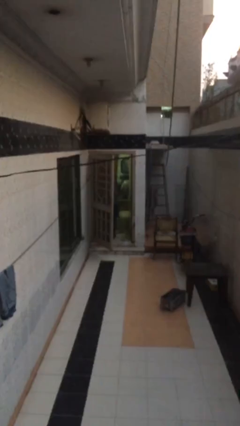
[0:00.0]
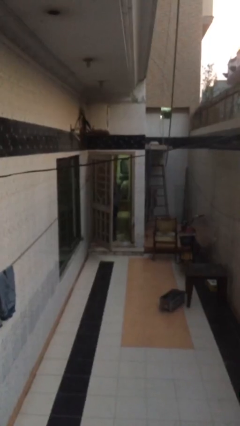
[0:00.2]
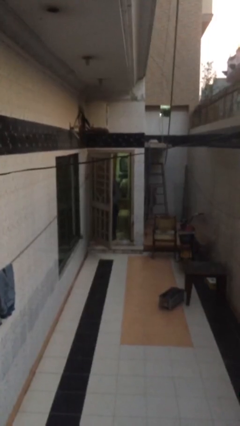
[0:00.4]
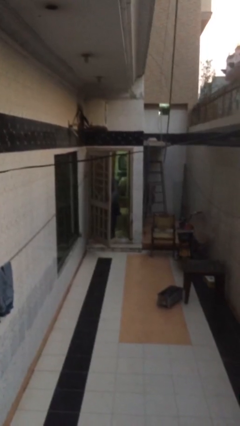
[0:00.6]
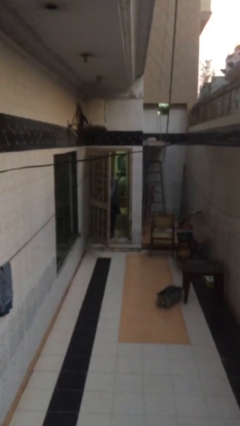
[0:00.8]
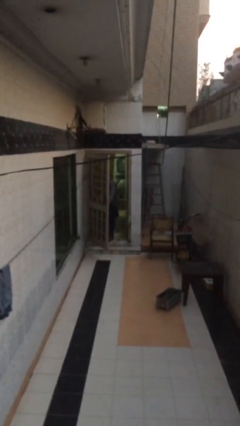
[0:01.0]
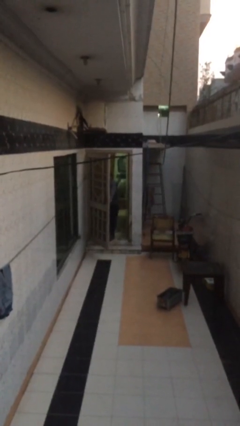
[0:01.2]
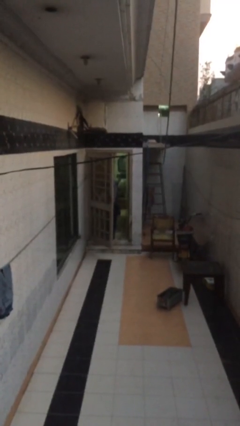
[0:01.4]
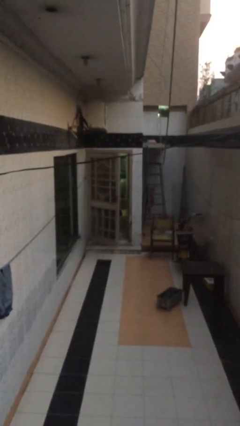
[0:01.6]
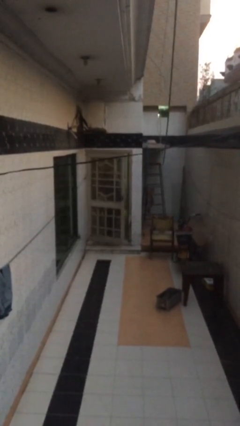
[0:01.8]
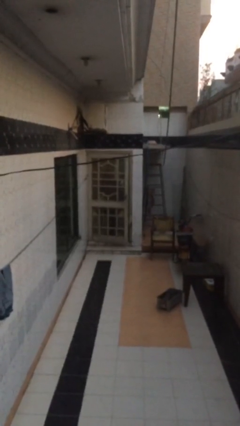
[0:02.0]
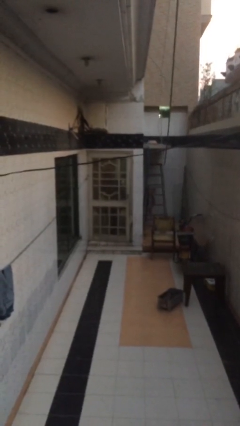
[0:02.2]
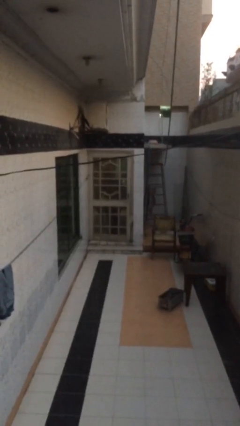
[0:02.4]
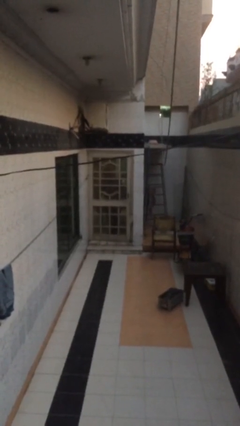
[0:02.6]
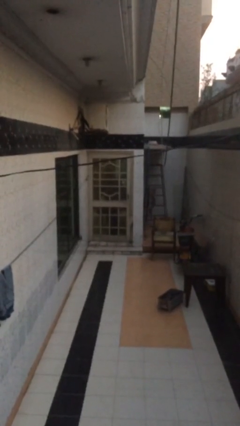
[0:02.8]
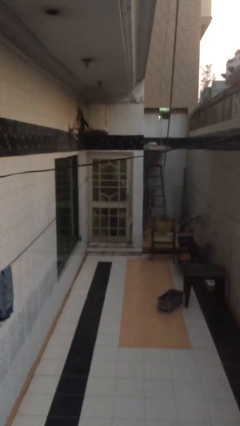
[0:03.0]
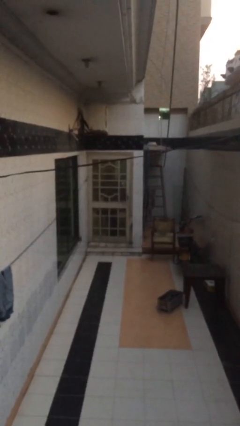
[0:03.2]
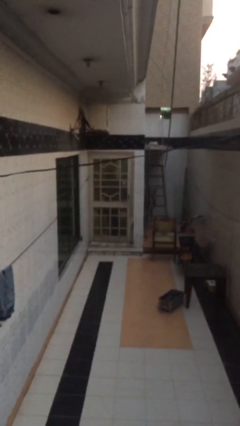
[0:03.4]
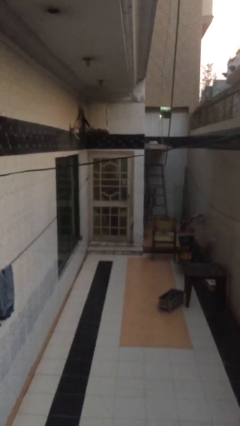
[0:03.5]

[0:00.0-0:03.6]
person closes facility door

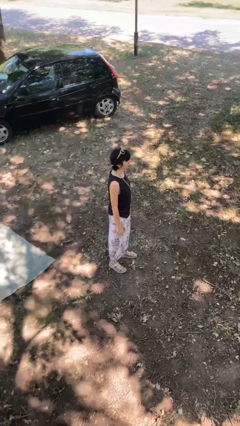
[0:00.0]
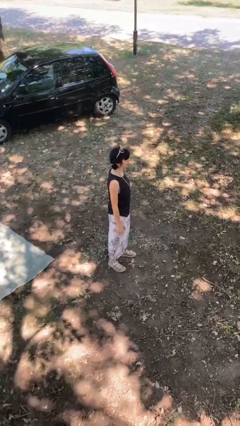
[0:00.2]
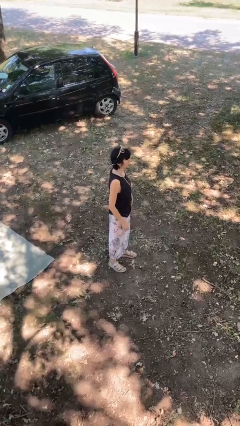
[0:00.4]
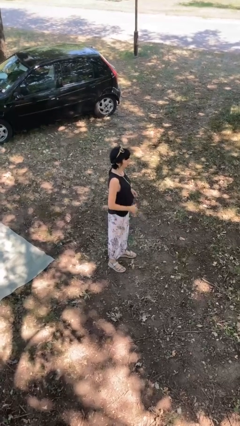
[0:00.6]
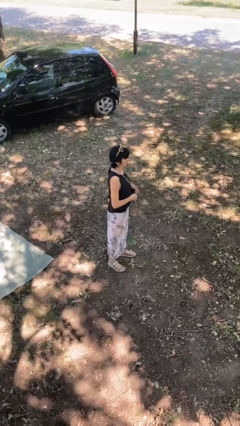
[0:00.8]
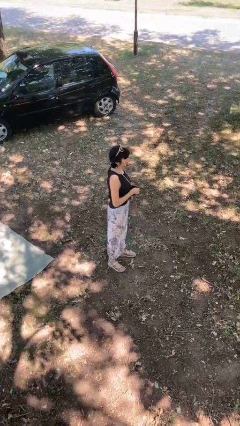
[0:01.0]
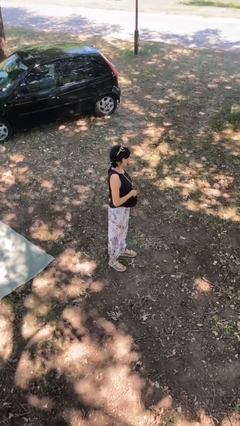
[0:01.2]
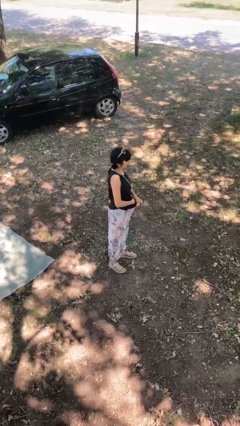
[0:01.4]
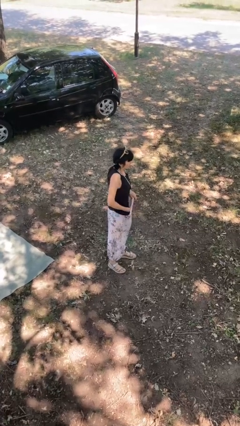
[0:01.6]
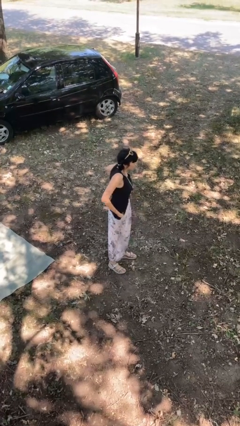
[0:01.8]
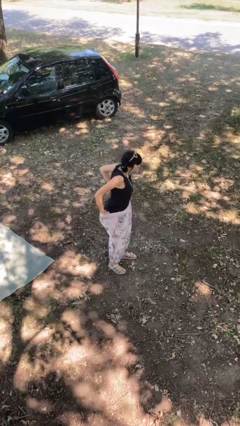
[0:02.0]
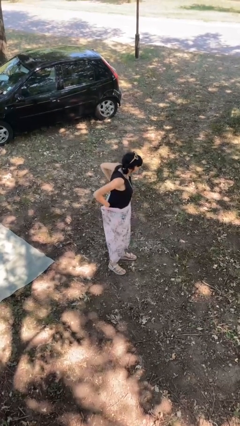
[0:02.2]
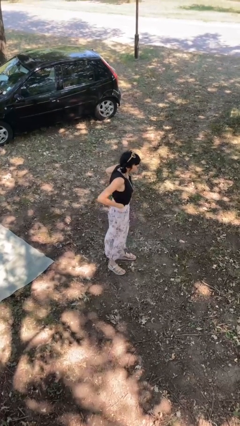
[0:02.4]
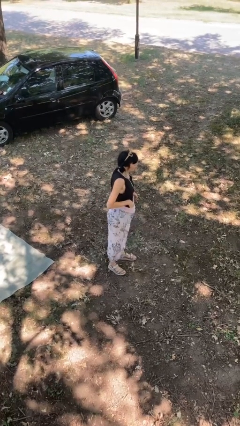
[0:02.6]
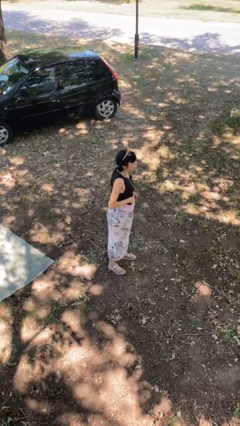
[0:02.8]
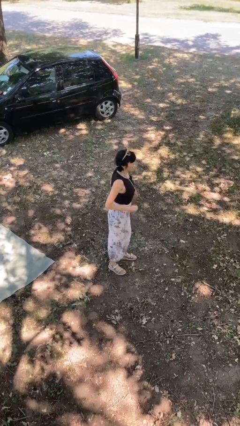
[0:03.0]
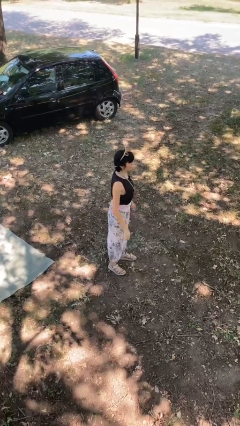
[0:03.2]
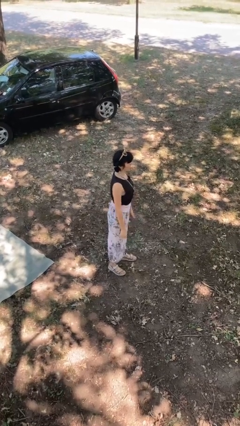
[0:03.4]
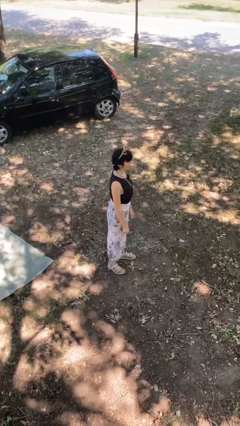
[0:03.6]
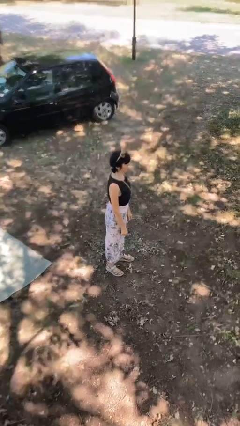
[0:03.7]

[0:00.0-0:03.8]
person tucks in shirt

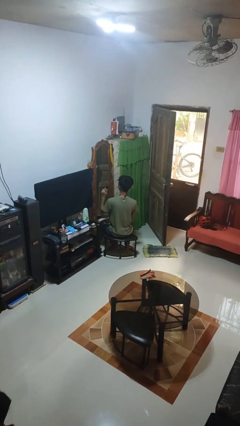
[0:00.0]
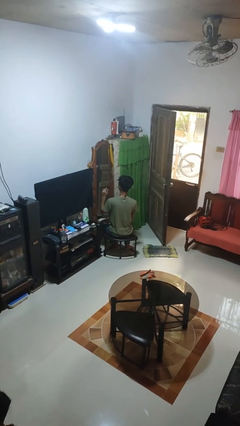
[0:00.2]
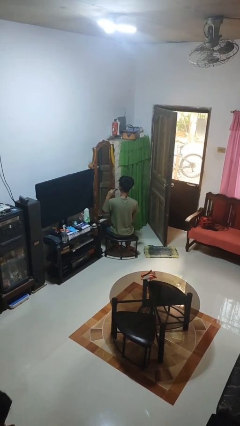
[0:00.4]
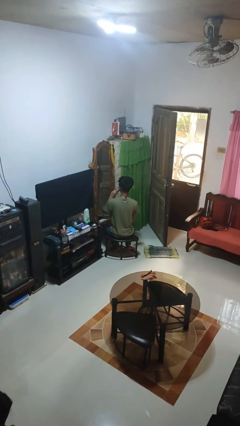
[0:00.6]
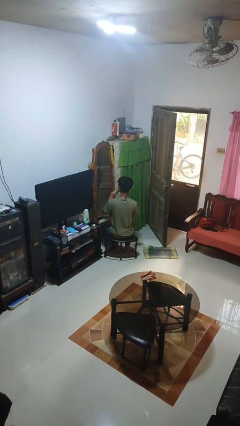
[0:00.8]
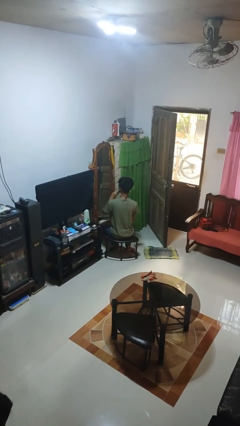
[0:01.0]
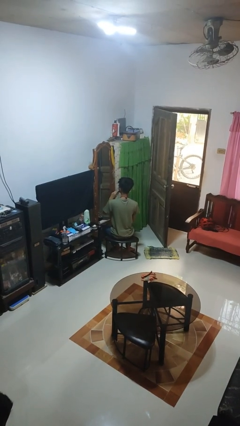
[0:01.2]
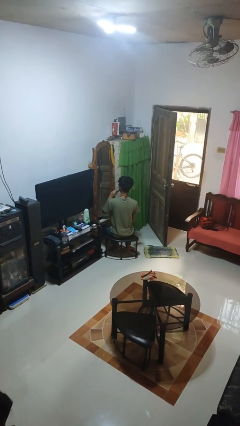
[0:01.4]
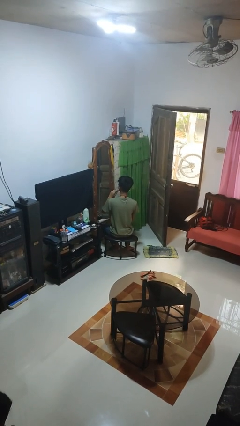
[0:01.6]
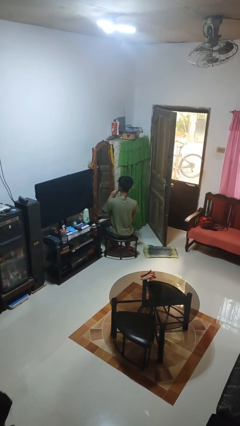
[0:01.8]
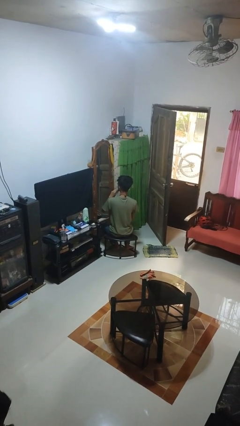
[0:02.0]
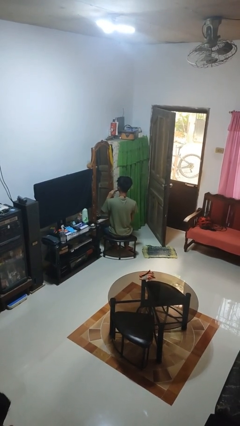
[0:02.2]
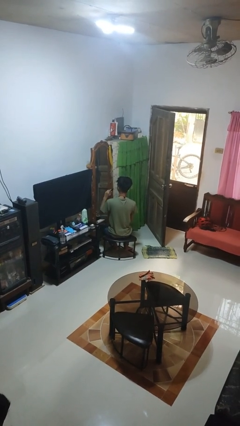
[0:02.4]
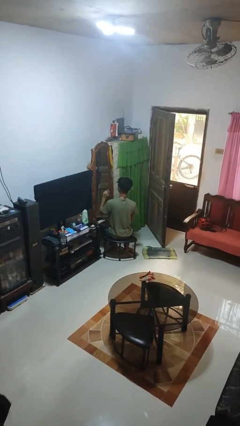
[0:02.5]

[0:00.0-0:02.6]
person applies lip makeup

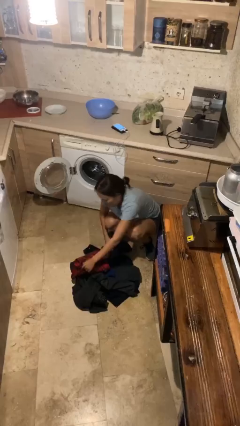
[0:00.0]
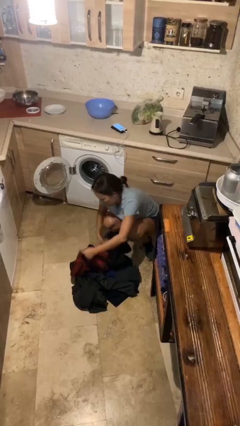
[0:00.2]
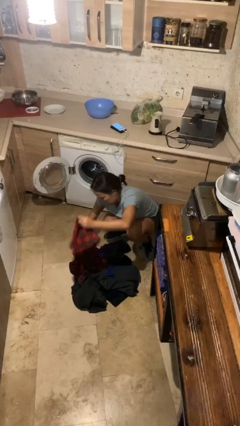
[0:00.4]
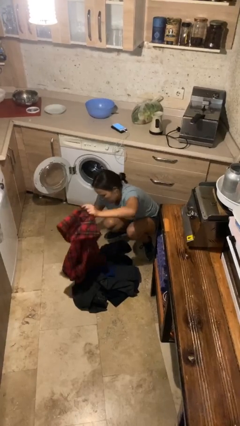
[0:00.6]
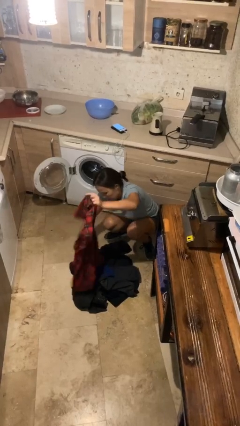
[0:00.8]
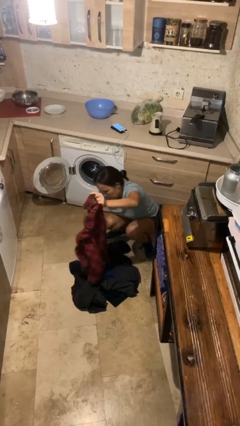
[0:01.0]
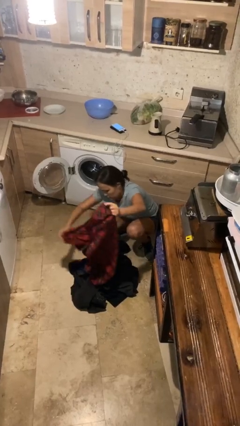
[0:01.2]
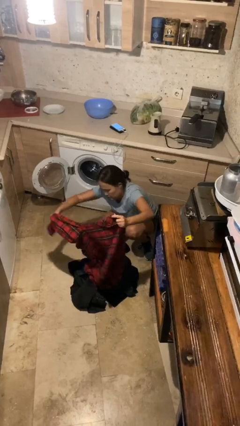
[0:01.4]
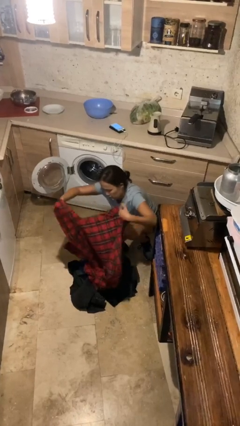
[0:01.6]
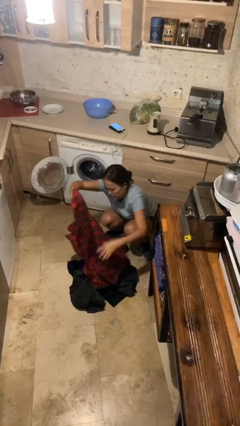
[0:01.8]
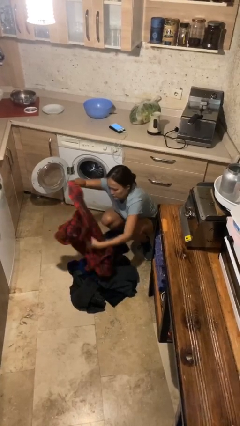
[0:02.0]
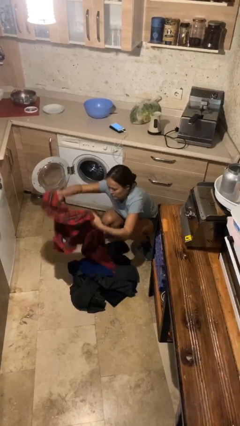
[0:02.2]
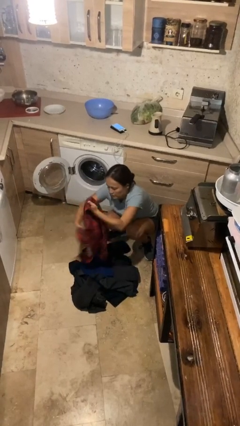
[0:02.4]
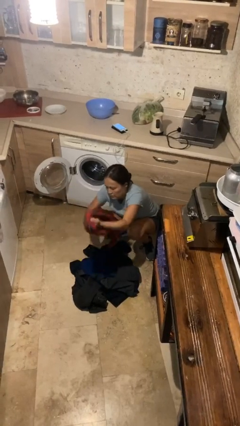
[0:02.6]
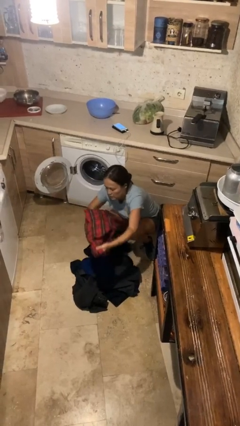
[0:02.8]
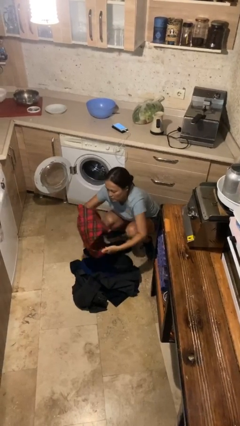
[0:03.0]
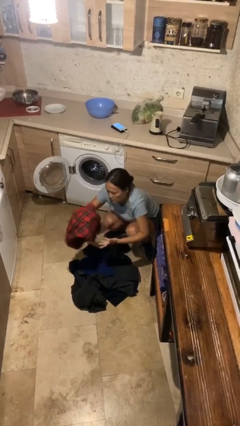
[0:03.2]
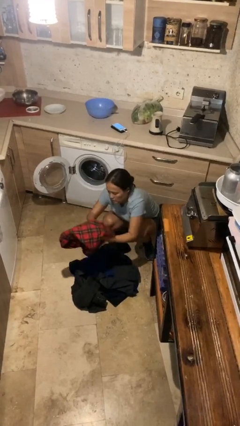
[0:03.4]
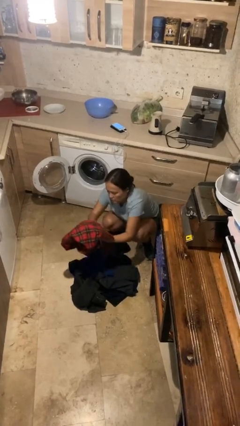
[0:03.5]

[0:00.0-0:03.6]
person folds shirt

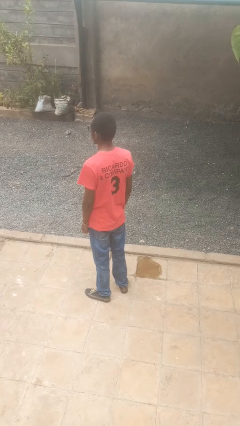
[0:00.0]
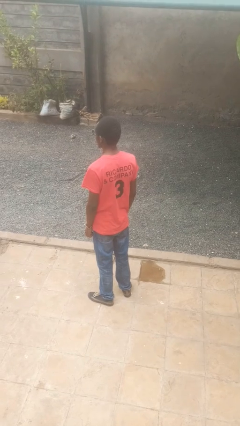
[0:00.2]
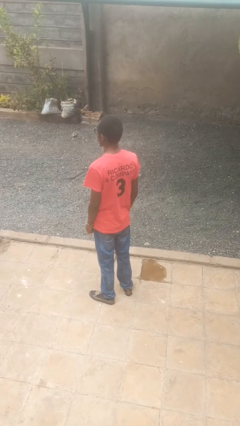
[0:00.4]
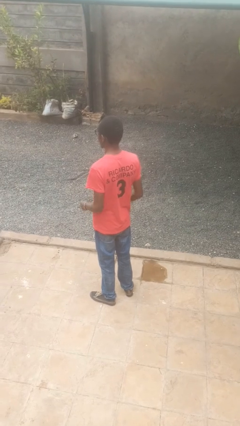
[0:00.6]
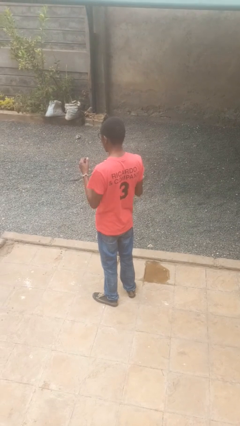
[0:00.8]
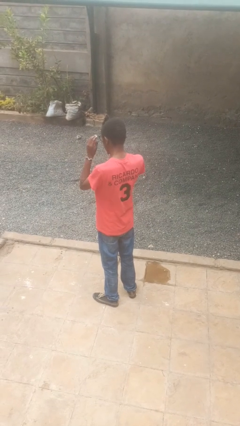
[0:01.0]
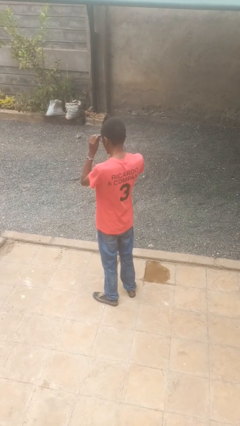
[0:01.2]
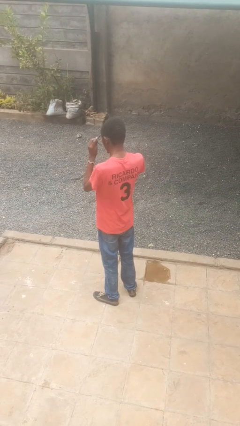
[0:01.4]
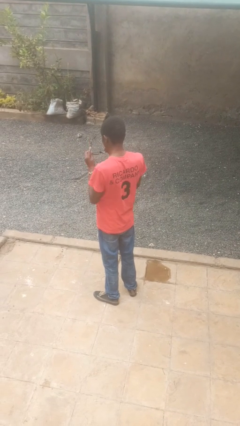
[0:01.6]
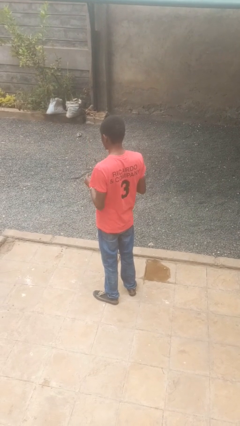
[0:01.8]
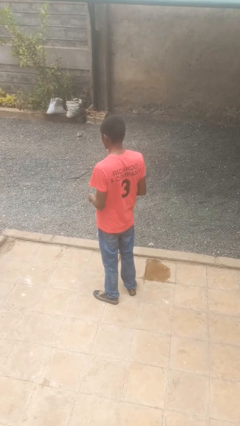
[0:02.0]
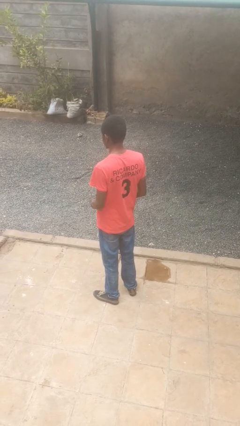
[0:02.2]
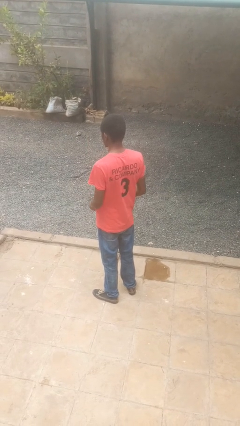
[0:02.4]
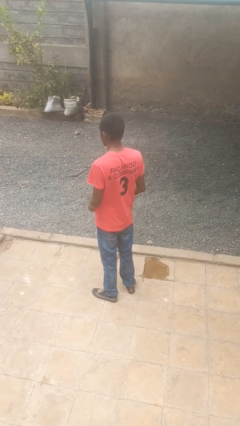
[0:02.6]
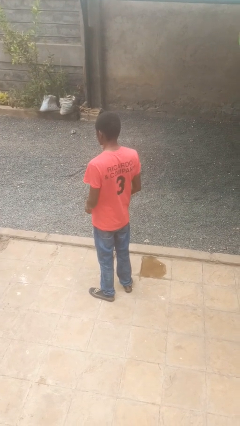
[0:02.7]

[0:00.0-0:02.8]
person takes off glasses

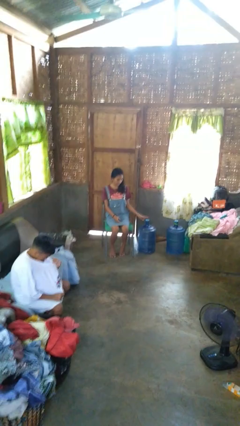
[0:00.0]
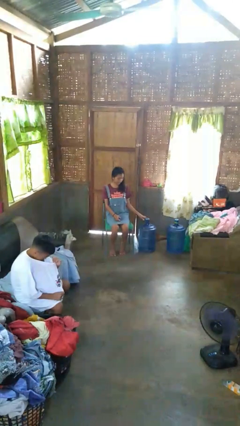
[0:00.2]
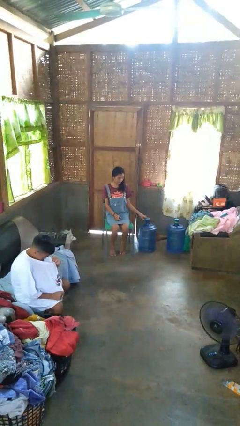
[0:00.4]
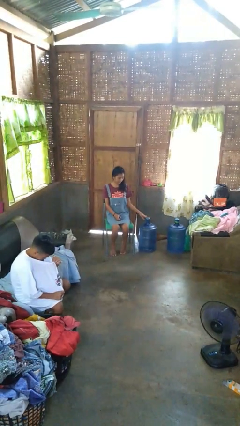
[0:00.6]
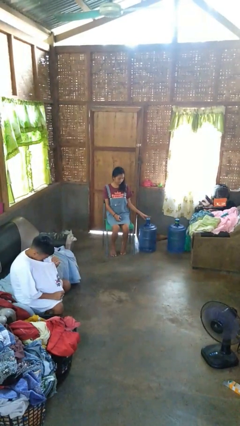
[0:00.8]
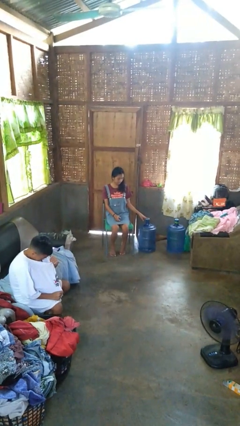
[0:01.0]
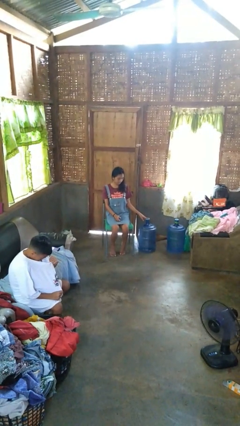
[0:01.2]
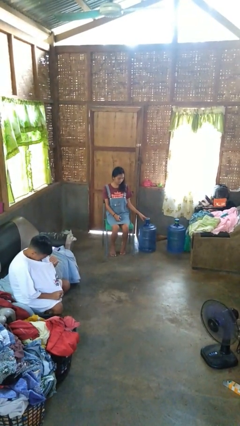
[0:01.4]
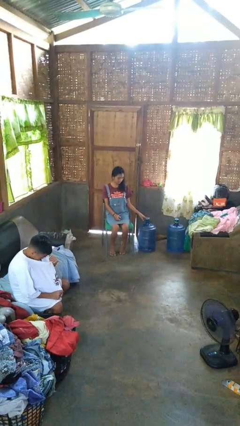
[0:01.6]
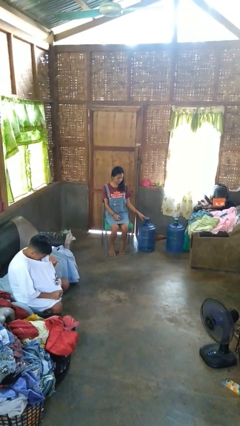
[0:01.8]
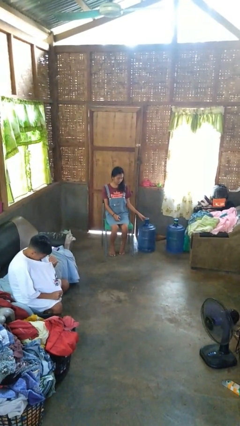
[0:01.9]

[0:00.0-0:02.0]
person taps object with finger
